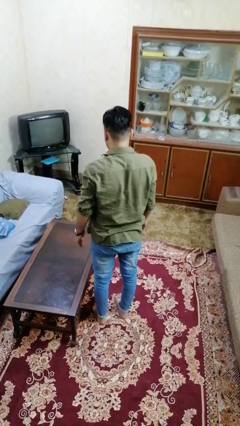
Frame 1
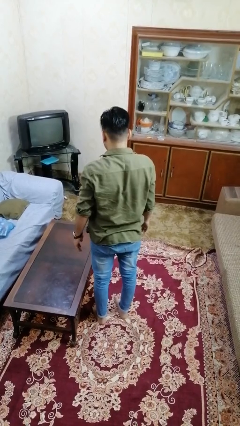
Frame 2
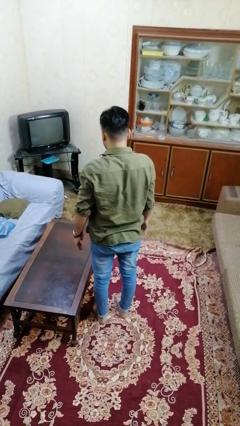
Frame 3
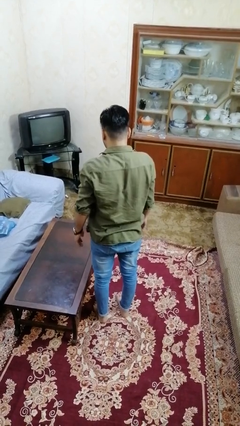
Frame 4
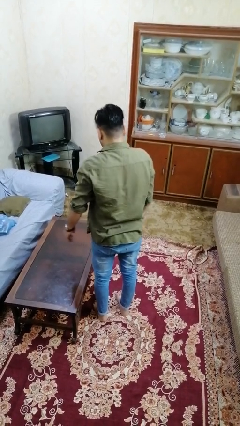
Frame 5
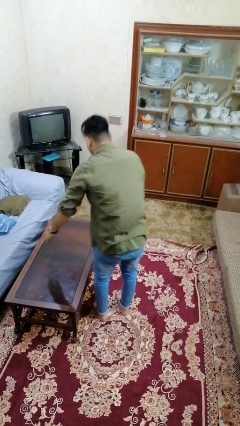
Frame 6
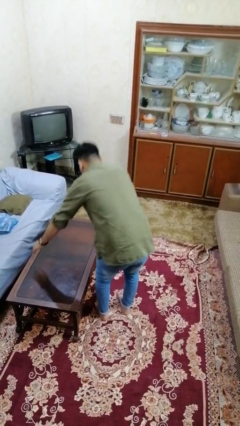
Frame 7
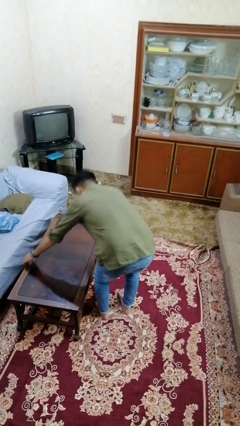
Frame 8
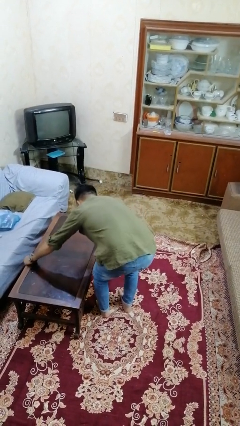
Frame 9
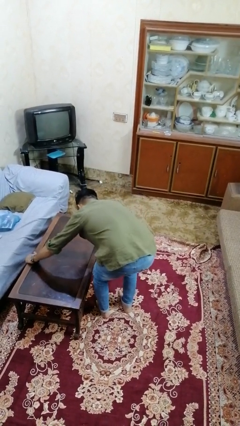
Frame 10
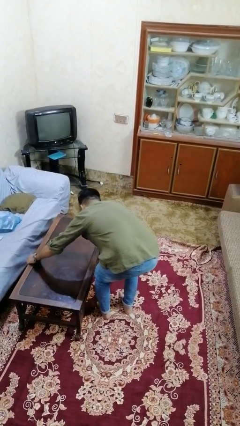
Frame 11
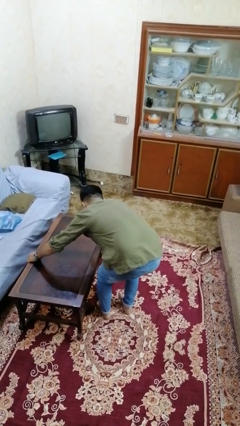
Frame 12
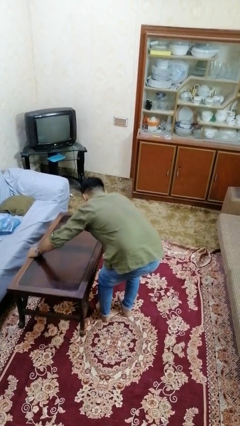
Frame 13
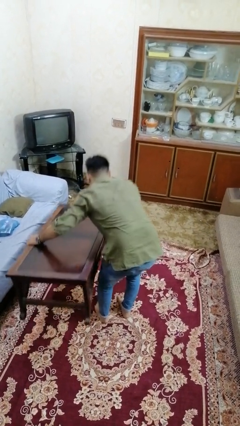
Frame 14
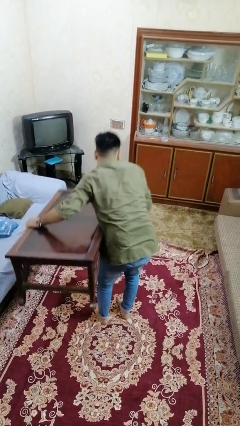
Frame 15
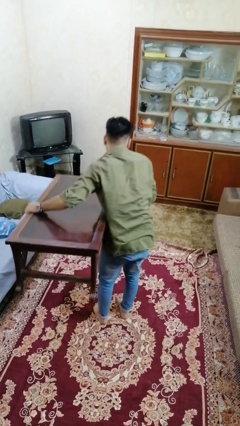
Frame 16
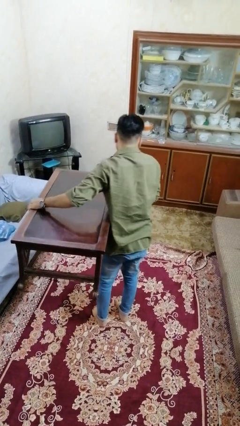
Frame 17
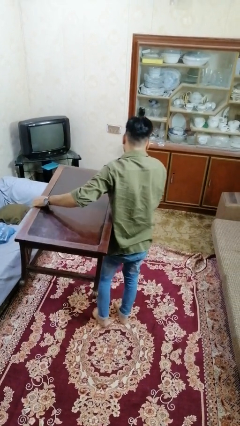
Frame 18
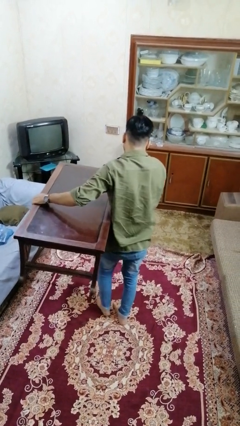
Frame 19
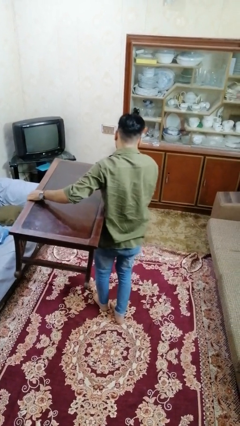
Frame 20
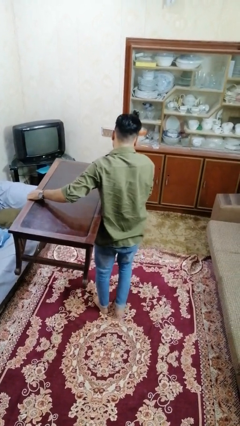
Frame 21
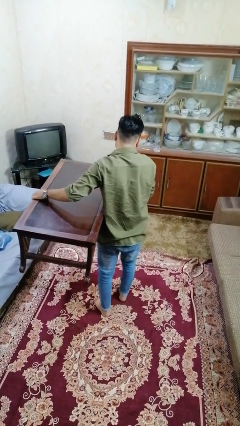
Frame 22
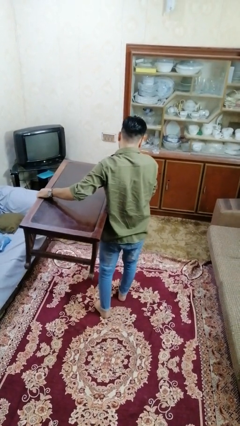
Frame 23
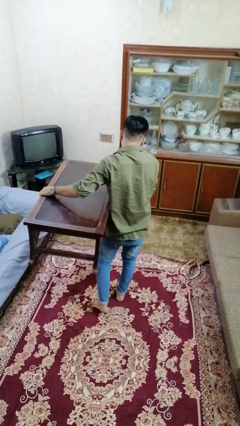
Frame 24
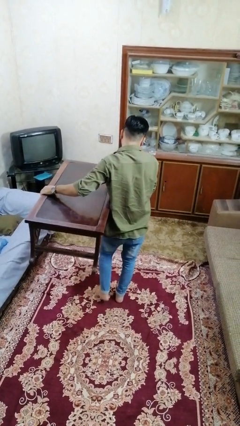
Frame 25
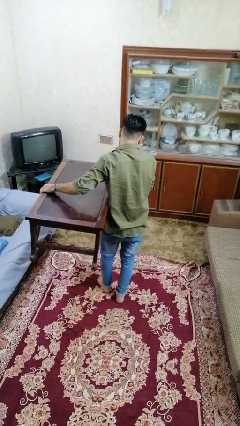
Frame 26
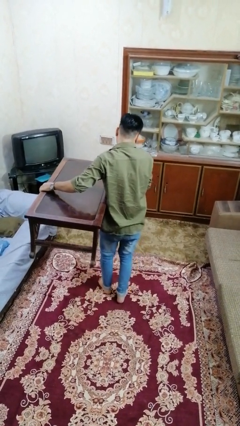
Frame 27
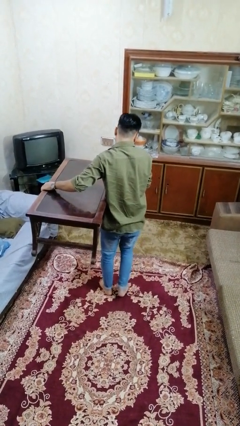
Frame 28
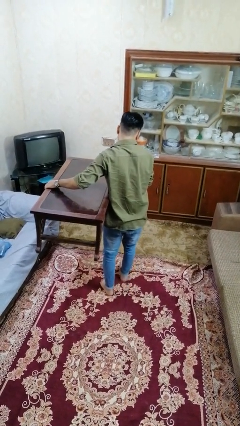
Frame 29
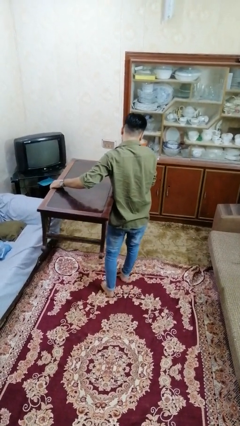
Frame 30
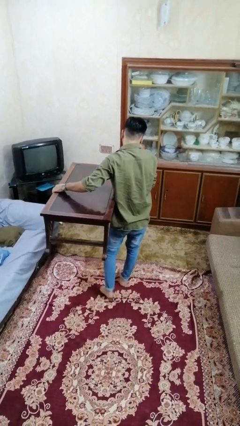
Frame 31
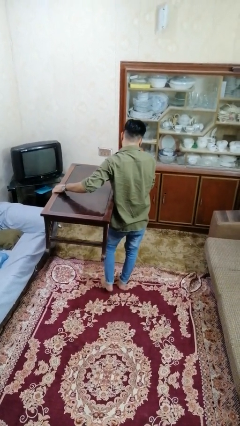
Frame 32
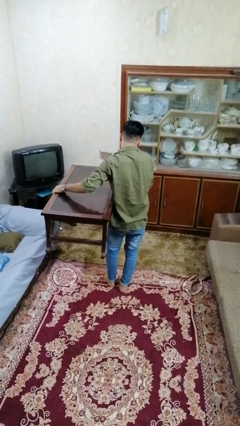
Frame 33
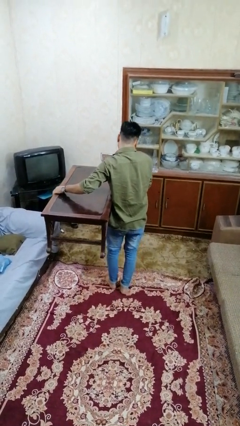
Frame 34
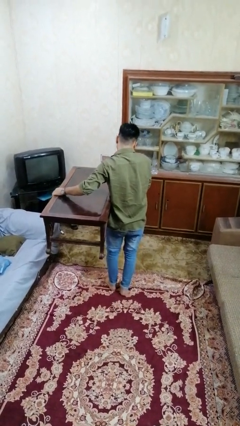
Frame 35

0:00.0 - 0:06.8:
person carries furniture

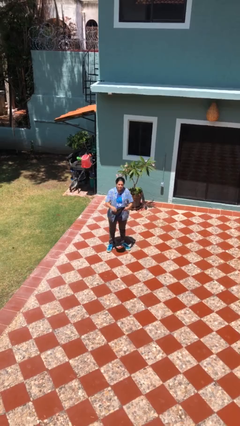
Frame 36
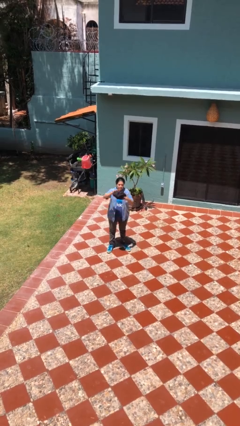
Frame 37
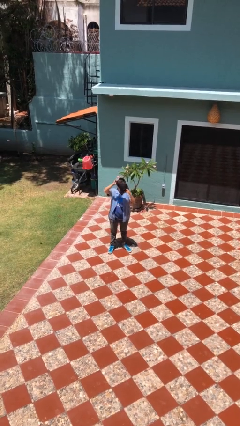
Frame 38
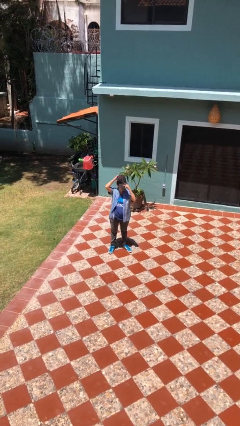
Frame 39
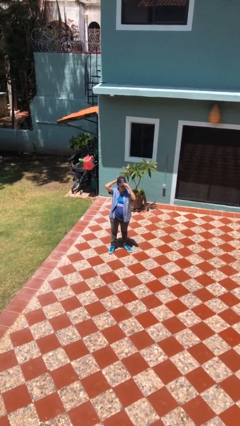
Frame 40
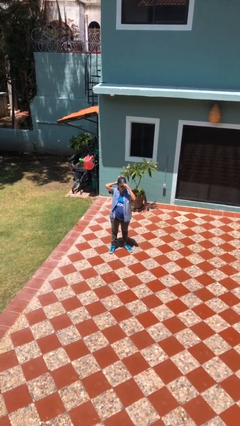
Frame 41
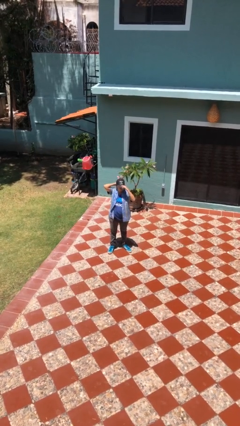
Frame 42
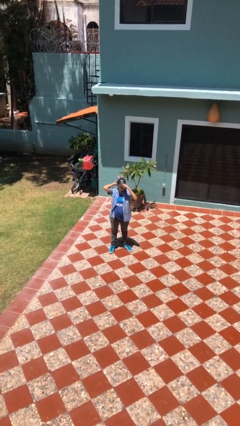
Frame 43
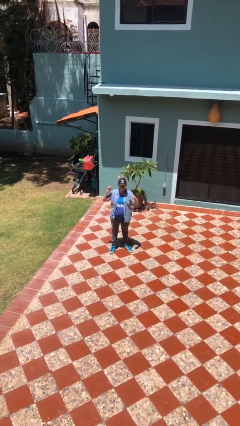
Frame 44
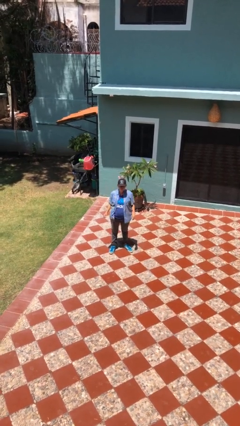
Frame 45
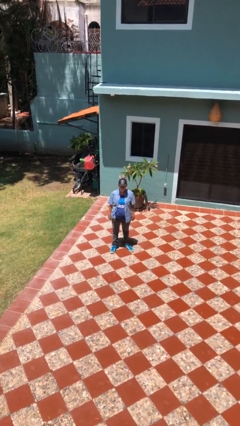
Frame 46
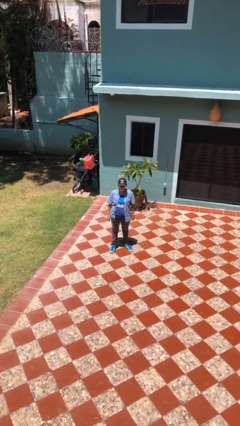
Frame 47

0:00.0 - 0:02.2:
person puts on hat

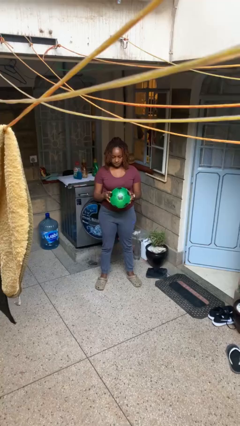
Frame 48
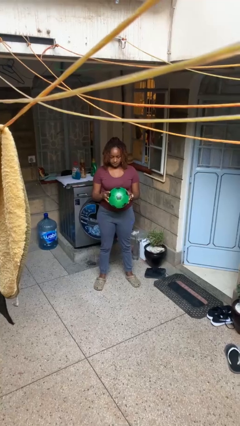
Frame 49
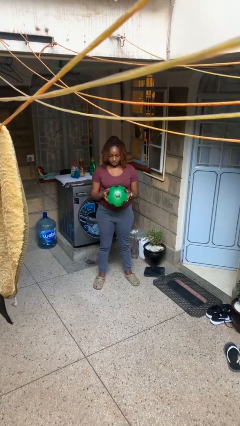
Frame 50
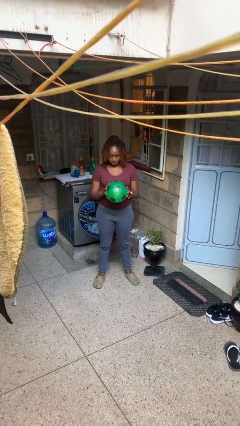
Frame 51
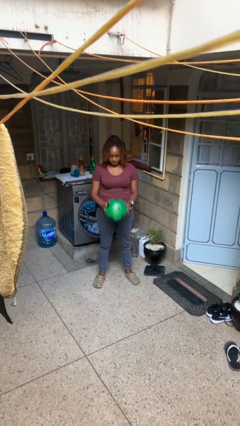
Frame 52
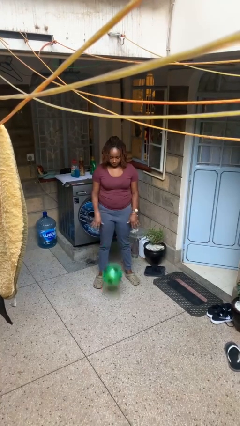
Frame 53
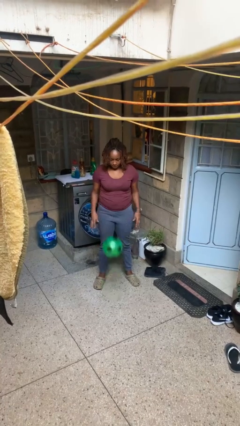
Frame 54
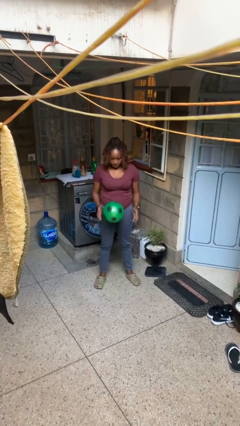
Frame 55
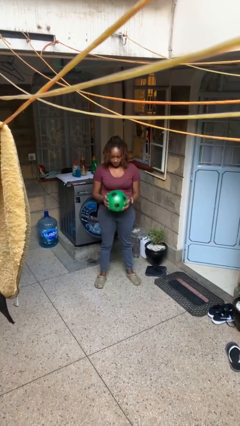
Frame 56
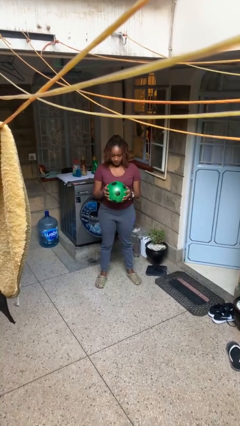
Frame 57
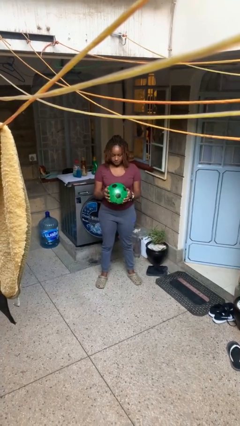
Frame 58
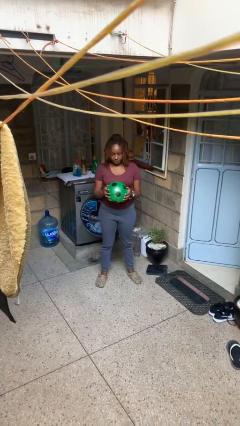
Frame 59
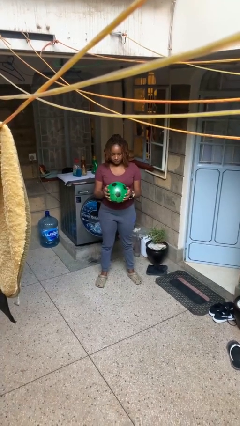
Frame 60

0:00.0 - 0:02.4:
person bounces ball on floor

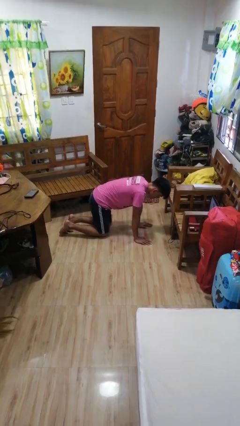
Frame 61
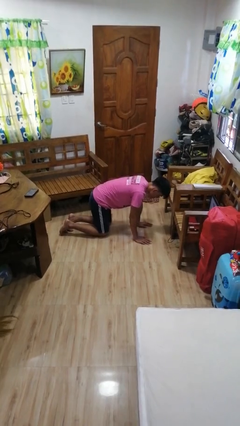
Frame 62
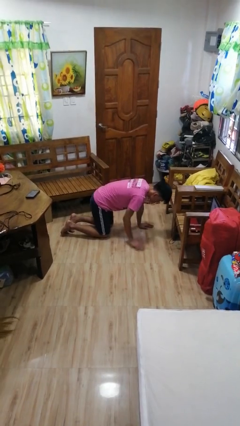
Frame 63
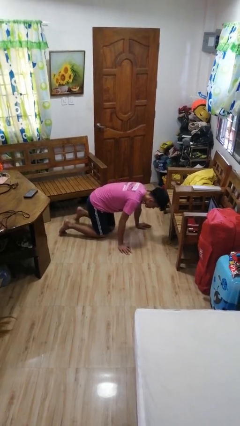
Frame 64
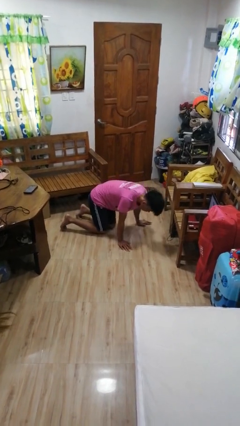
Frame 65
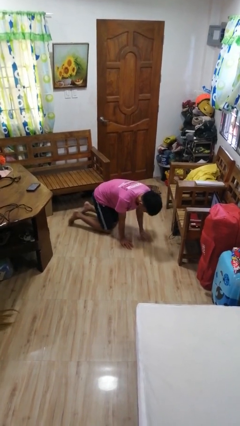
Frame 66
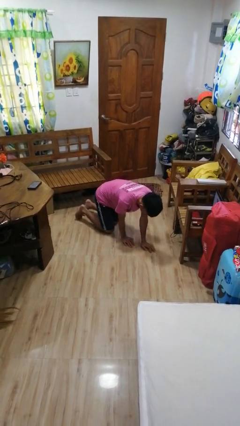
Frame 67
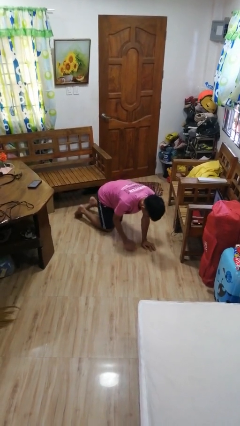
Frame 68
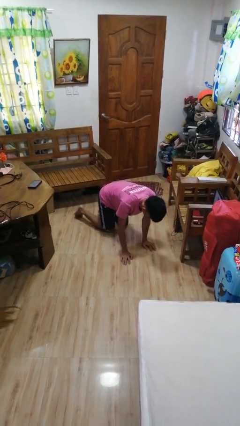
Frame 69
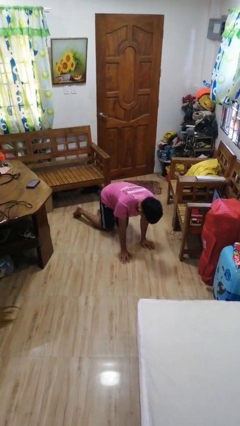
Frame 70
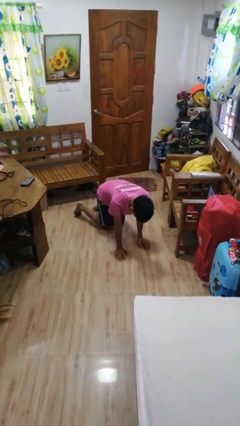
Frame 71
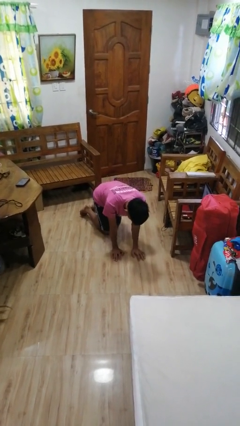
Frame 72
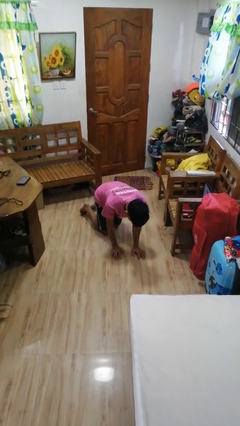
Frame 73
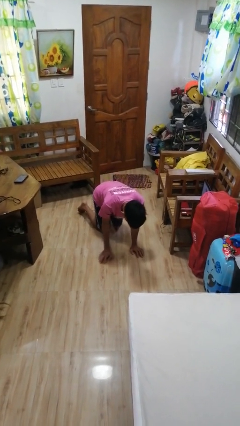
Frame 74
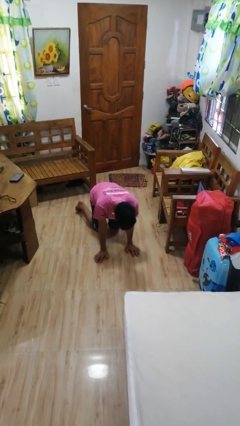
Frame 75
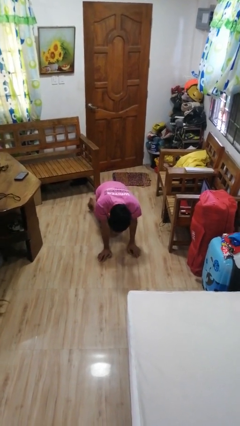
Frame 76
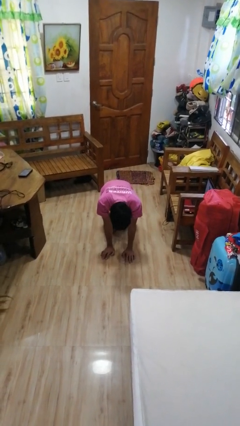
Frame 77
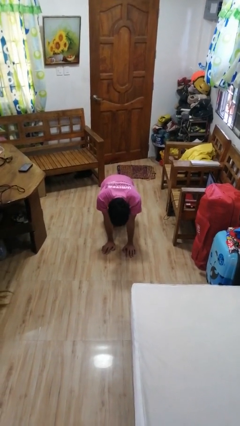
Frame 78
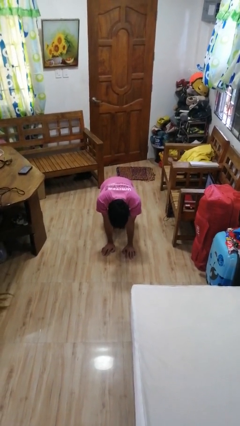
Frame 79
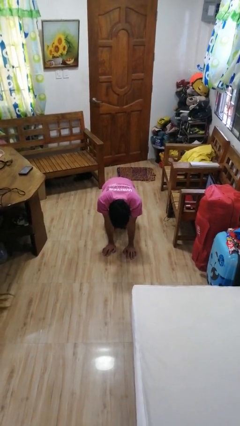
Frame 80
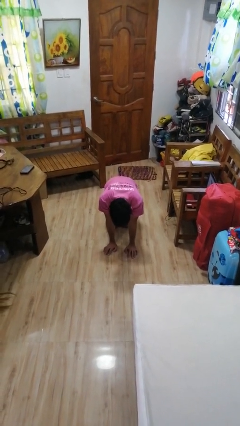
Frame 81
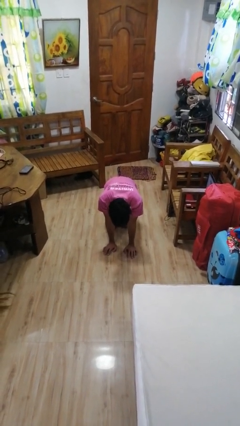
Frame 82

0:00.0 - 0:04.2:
person crawls

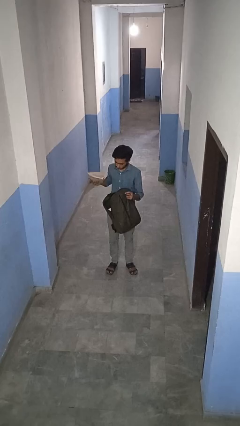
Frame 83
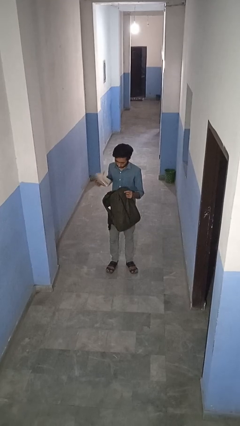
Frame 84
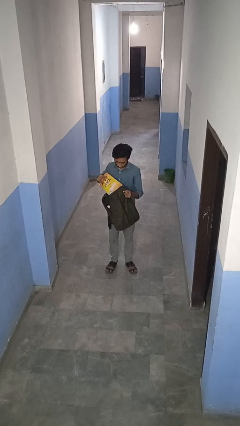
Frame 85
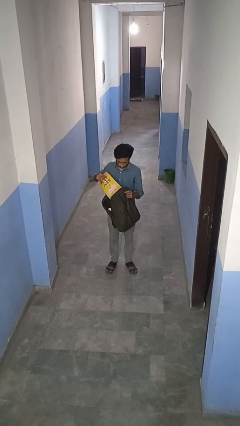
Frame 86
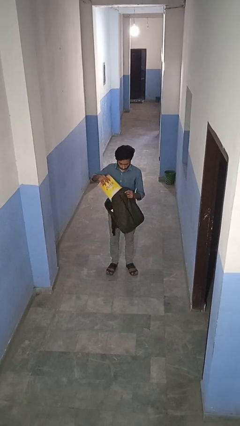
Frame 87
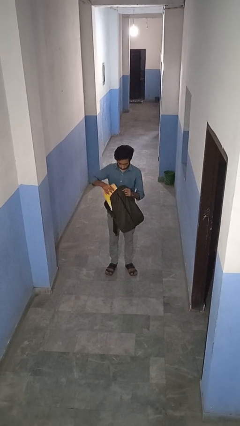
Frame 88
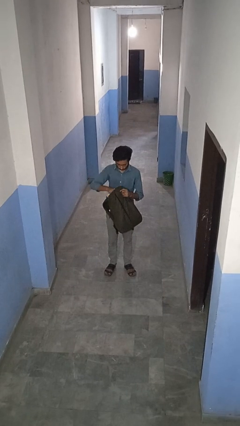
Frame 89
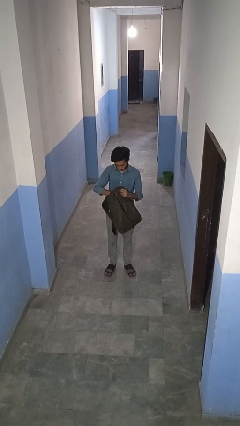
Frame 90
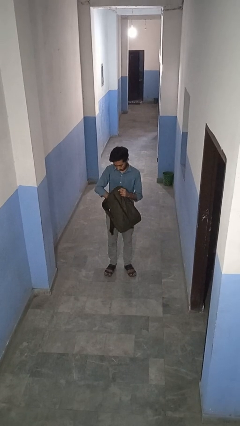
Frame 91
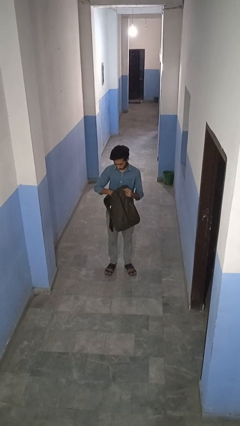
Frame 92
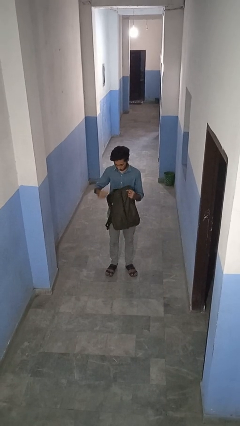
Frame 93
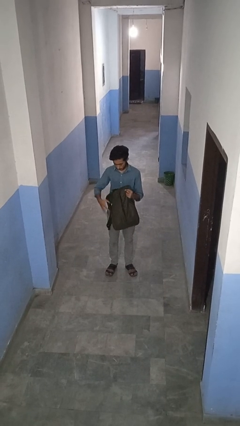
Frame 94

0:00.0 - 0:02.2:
person puts object into backpack
